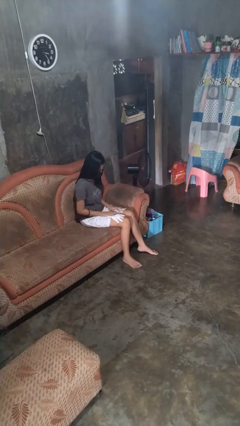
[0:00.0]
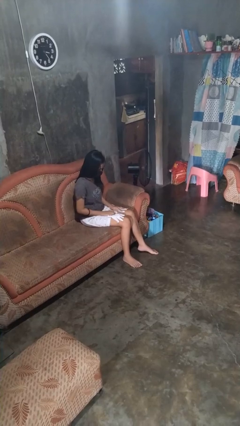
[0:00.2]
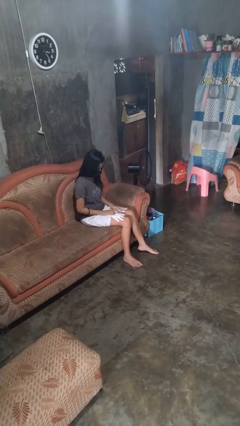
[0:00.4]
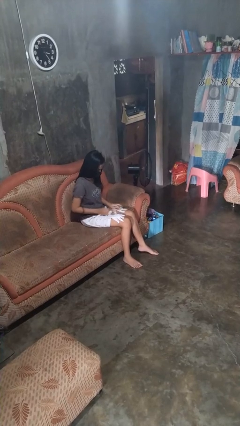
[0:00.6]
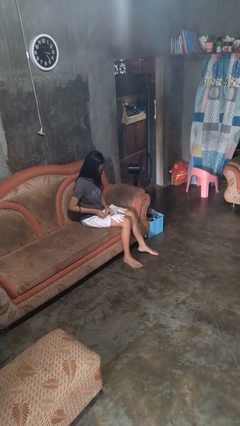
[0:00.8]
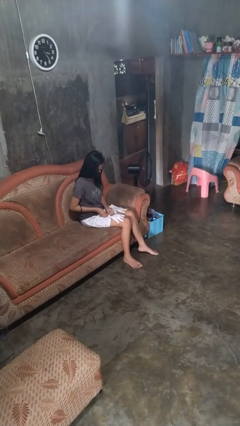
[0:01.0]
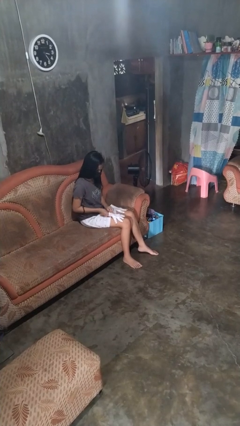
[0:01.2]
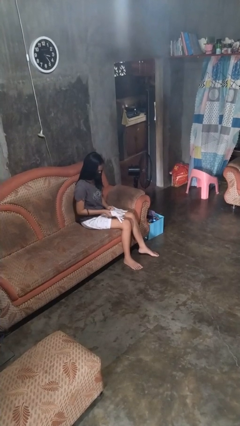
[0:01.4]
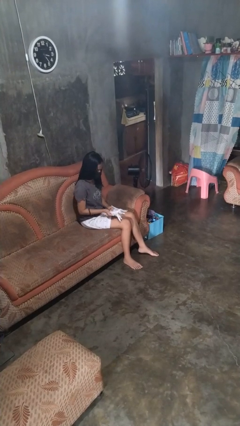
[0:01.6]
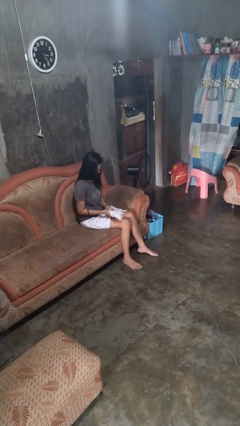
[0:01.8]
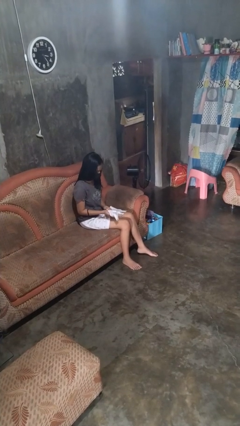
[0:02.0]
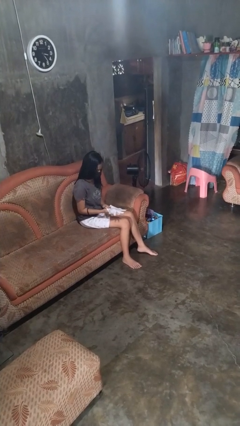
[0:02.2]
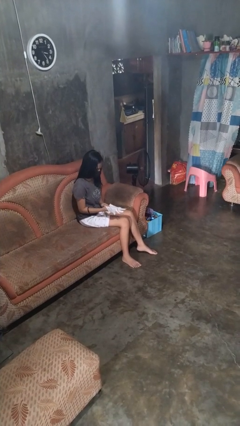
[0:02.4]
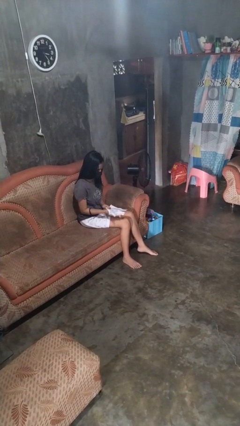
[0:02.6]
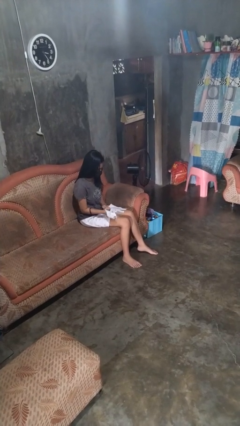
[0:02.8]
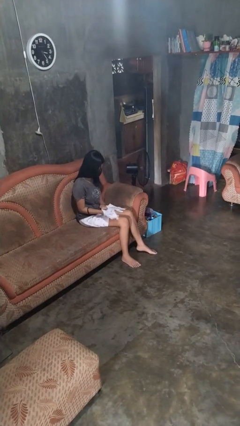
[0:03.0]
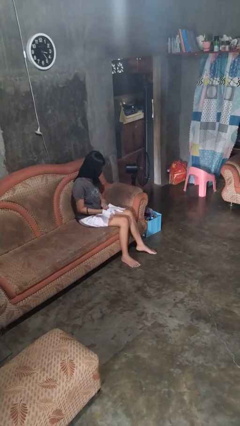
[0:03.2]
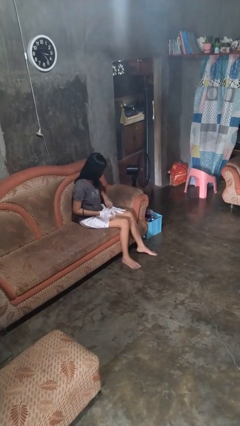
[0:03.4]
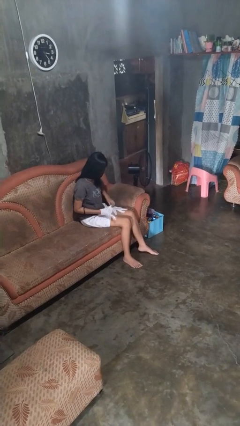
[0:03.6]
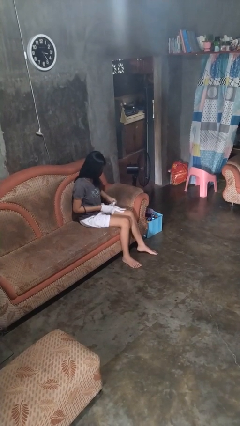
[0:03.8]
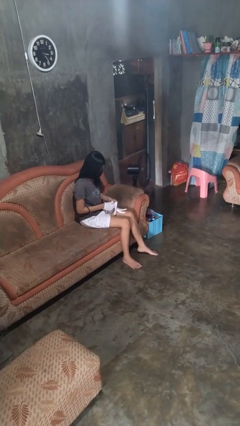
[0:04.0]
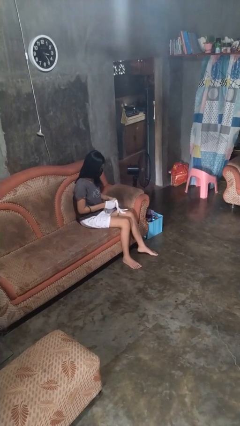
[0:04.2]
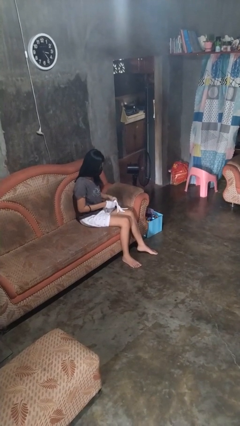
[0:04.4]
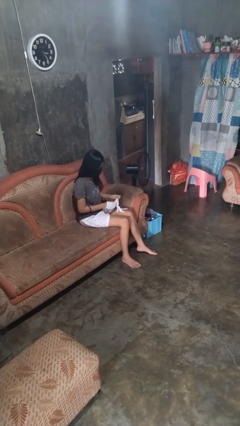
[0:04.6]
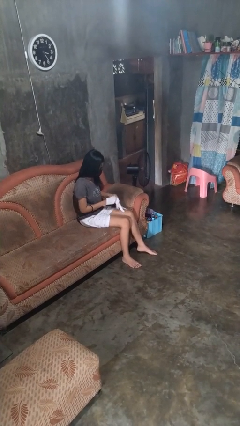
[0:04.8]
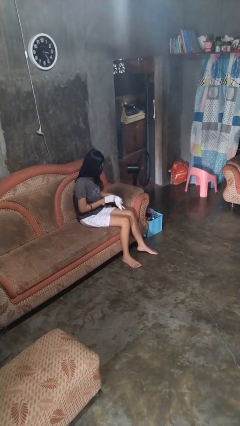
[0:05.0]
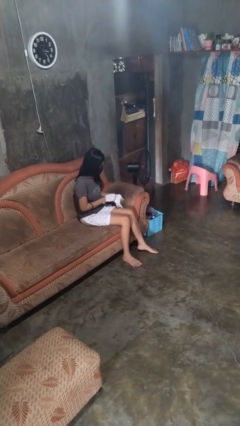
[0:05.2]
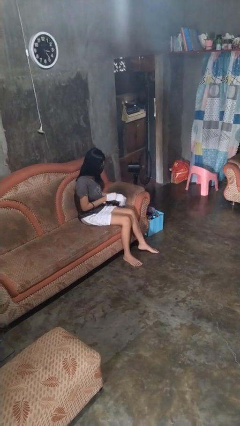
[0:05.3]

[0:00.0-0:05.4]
person puts on gloves

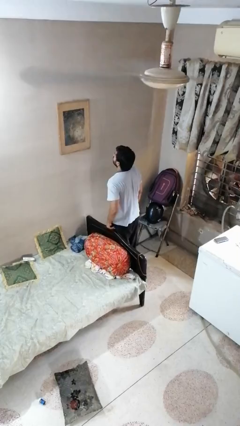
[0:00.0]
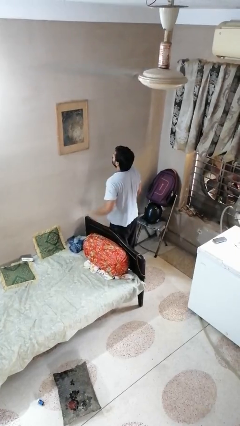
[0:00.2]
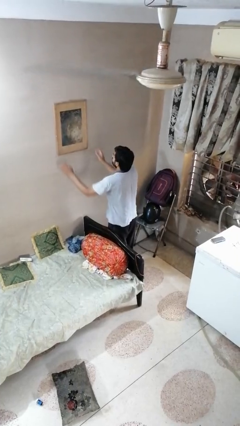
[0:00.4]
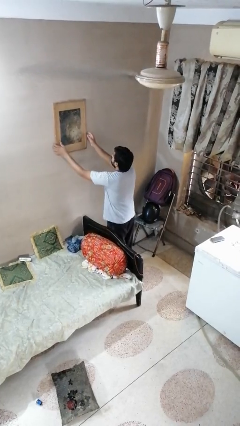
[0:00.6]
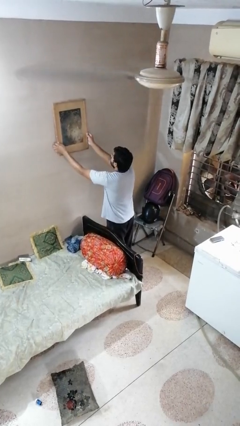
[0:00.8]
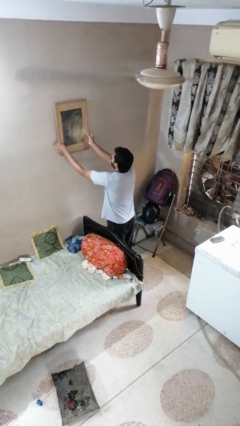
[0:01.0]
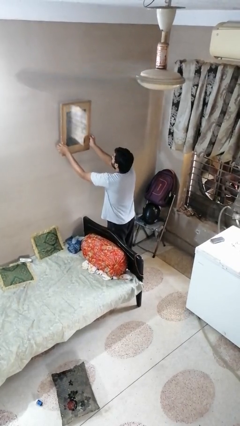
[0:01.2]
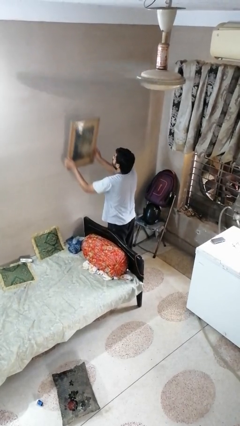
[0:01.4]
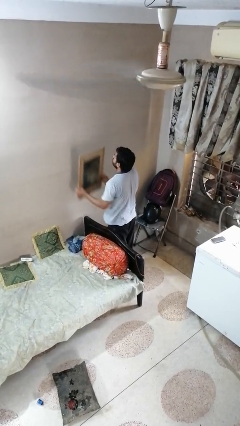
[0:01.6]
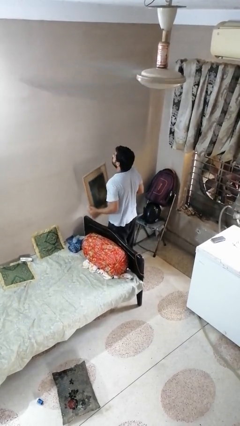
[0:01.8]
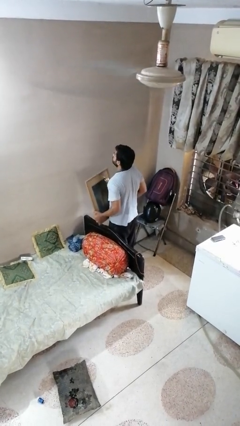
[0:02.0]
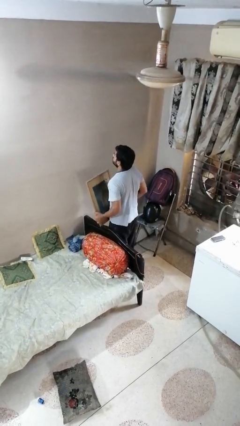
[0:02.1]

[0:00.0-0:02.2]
person takes down picture frame

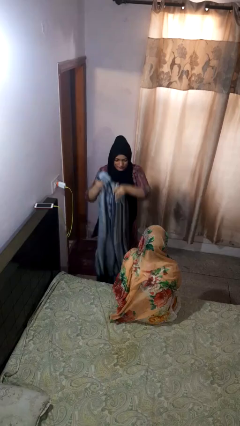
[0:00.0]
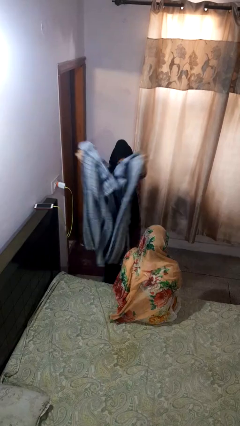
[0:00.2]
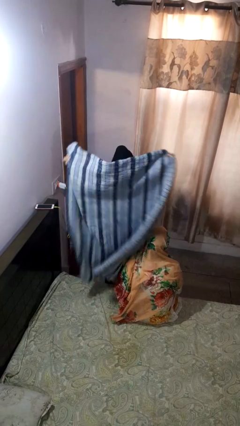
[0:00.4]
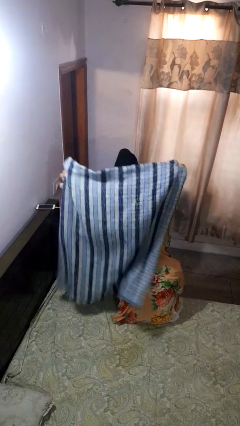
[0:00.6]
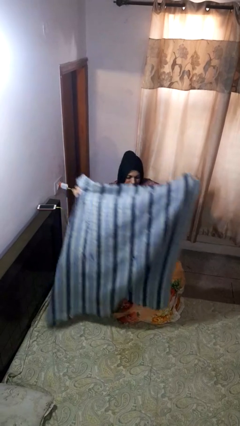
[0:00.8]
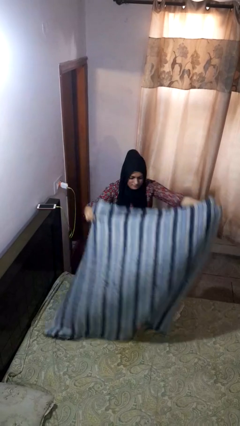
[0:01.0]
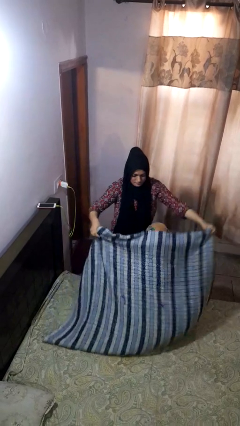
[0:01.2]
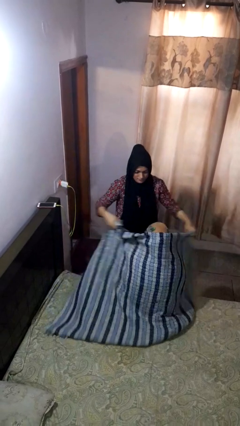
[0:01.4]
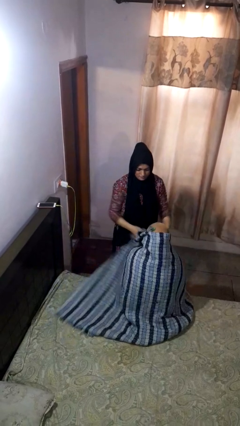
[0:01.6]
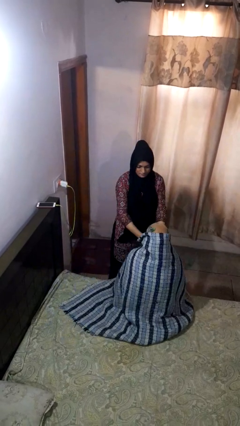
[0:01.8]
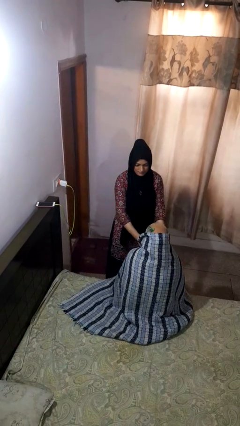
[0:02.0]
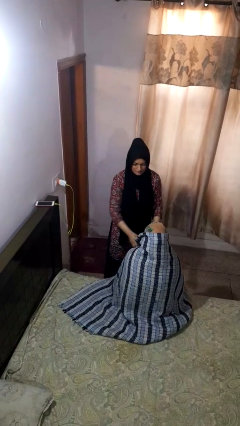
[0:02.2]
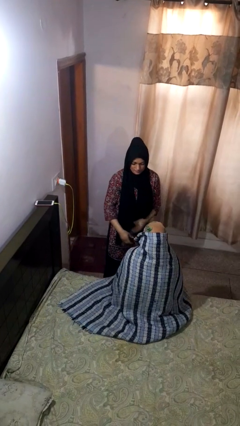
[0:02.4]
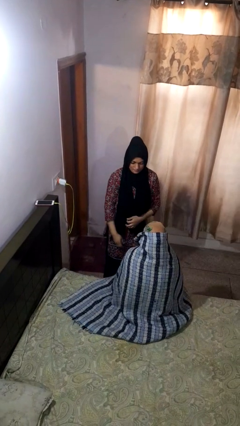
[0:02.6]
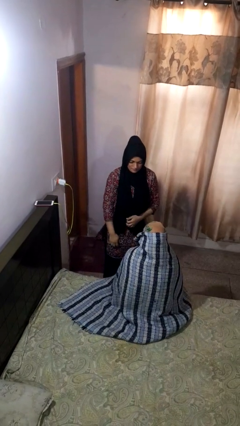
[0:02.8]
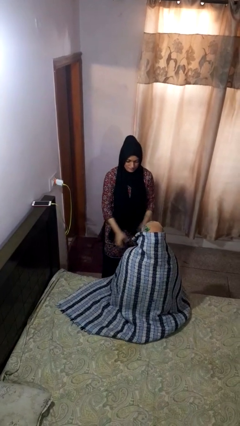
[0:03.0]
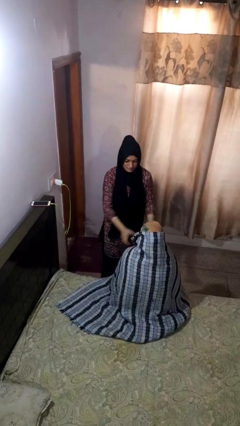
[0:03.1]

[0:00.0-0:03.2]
person covers friend with blanket

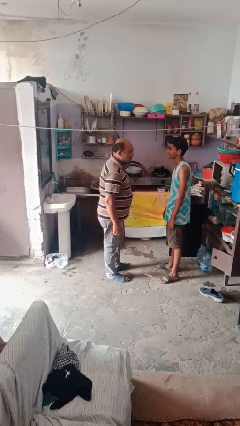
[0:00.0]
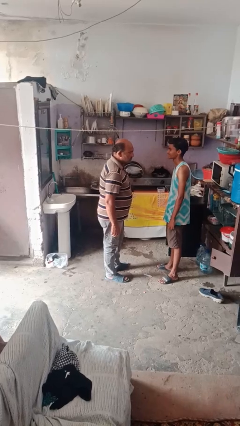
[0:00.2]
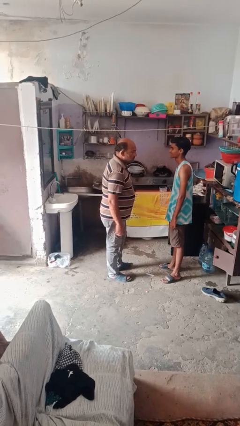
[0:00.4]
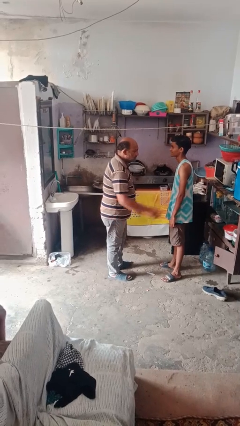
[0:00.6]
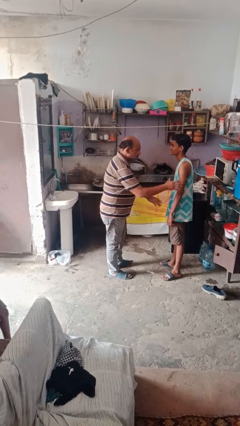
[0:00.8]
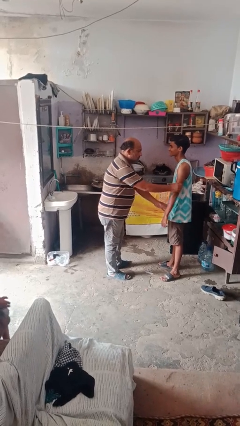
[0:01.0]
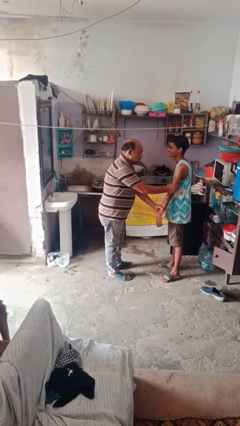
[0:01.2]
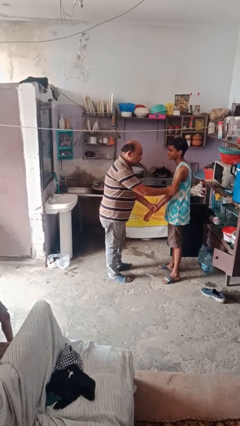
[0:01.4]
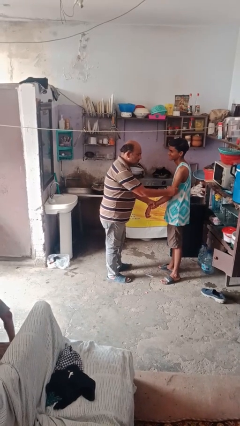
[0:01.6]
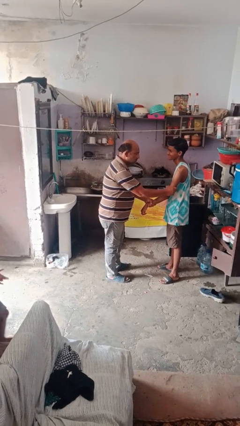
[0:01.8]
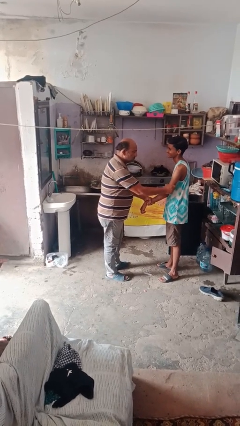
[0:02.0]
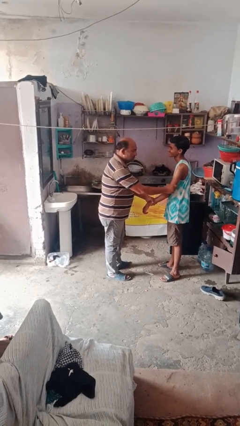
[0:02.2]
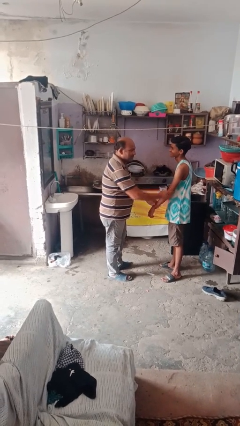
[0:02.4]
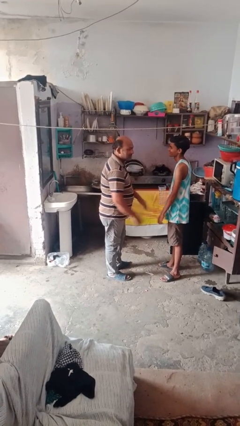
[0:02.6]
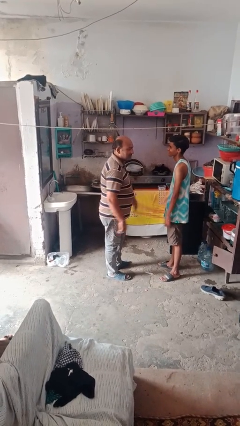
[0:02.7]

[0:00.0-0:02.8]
person grabs person by forearm

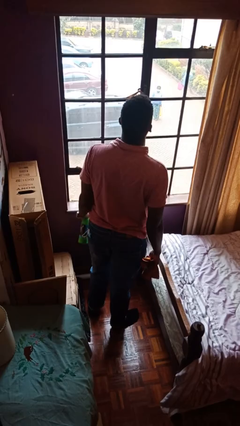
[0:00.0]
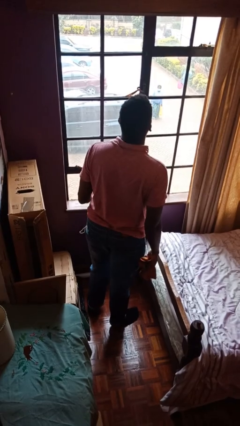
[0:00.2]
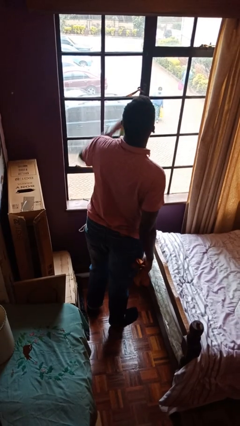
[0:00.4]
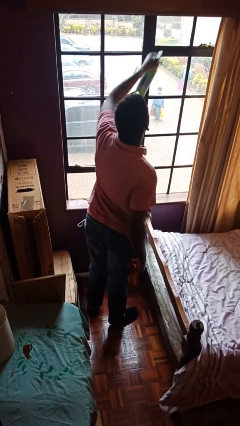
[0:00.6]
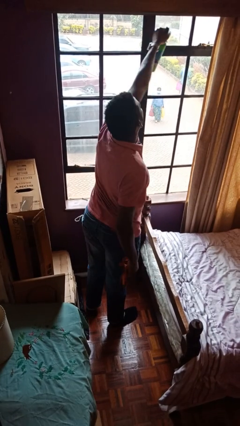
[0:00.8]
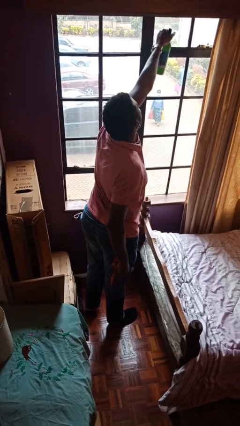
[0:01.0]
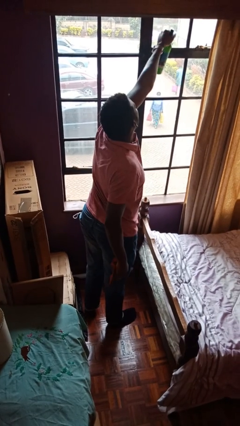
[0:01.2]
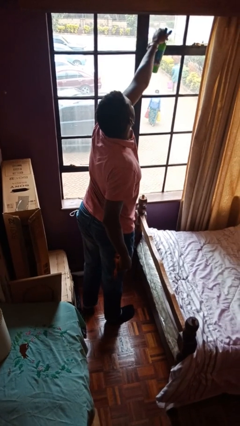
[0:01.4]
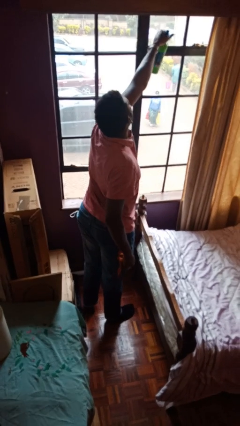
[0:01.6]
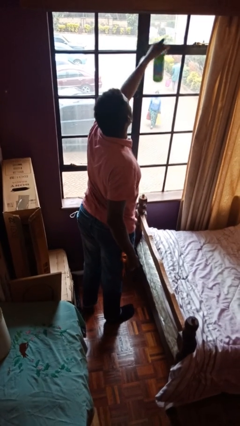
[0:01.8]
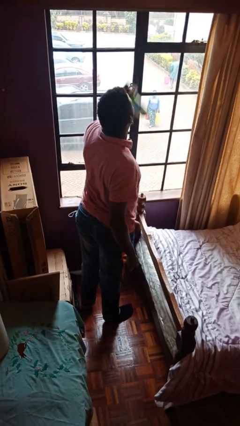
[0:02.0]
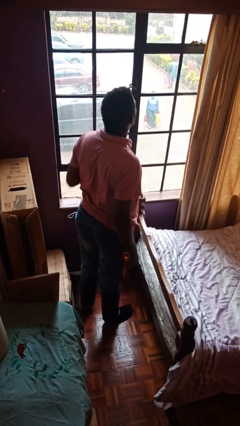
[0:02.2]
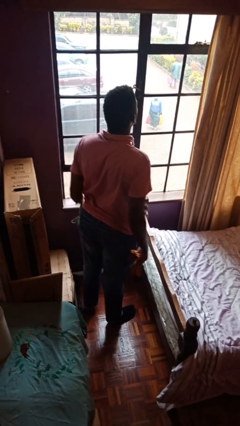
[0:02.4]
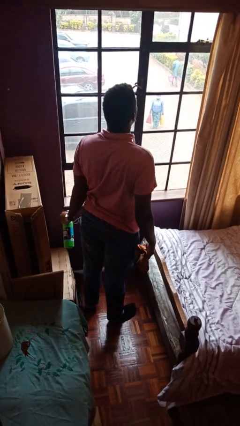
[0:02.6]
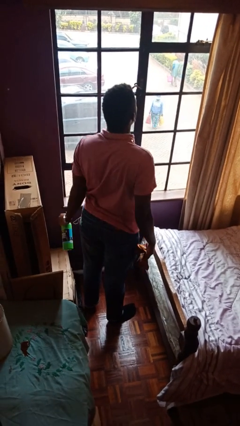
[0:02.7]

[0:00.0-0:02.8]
person sprays from bottle

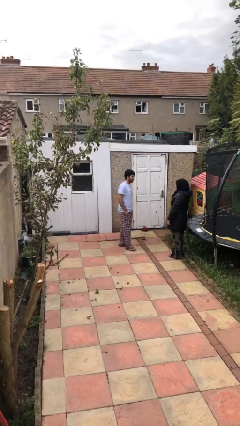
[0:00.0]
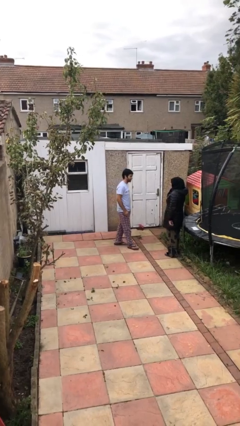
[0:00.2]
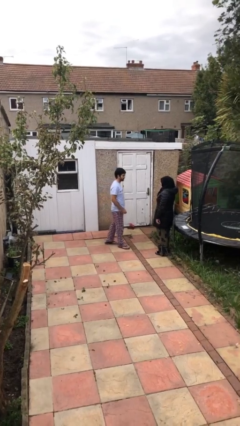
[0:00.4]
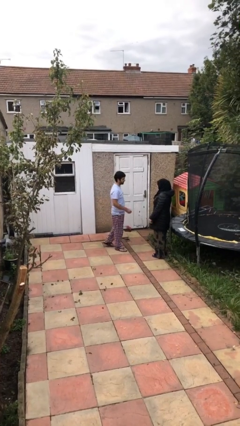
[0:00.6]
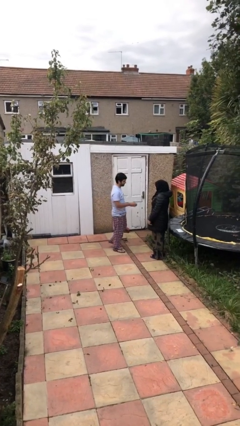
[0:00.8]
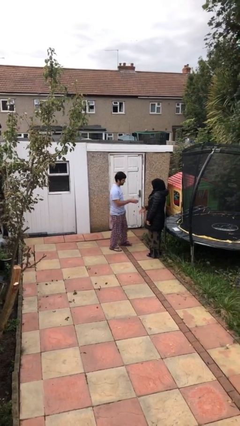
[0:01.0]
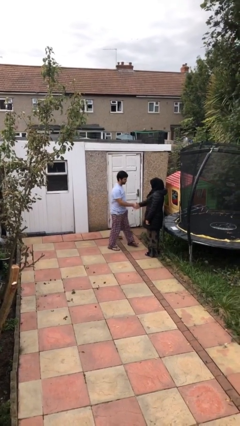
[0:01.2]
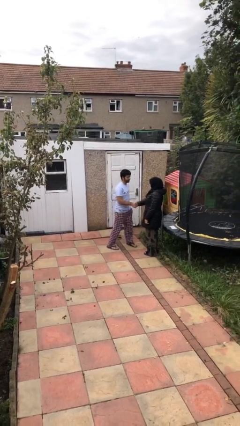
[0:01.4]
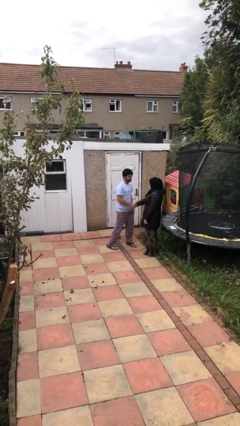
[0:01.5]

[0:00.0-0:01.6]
person shakes hand
